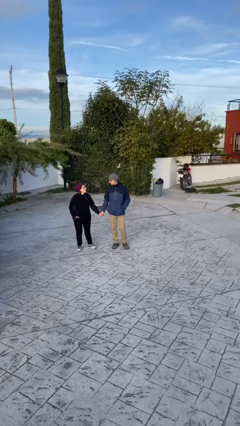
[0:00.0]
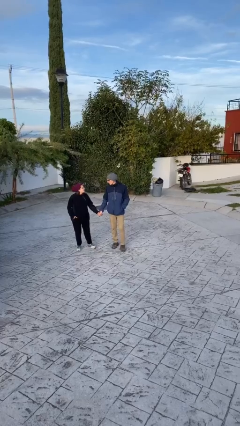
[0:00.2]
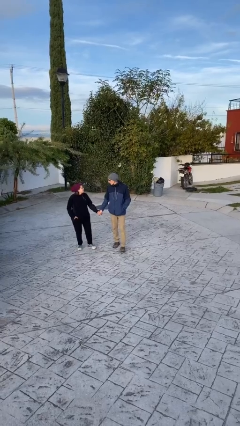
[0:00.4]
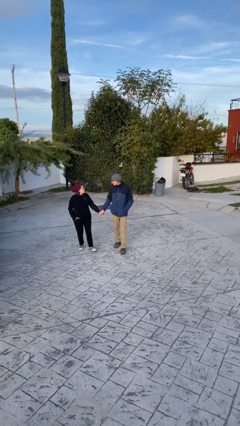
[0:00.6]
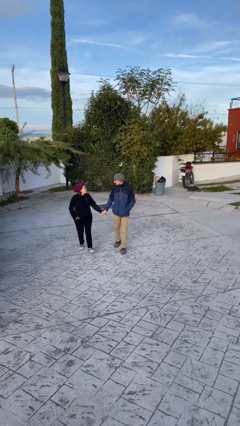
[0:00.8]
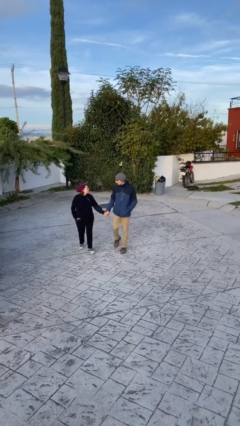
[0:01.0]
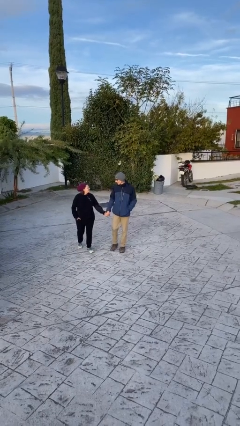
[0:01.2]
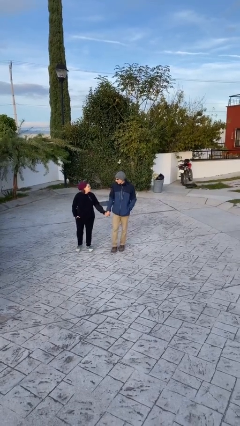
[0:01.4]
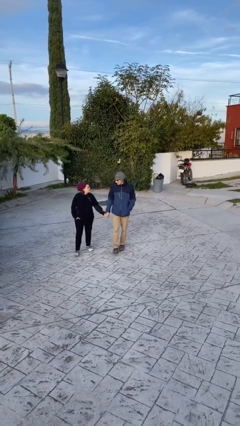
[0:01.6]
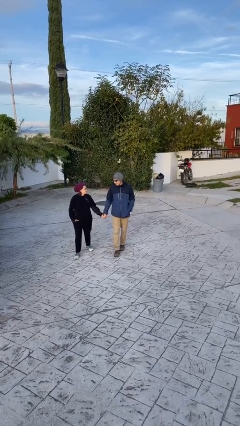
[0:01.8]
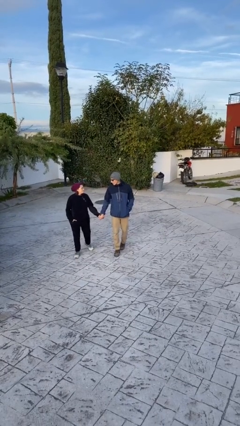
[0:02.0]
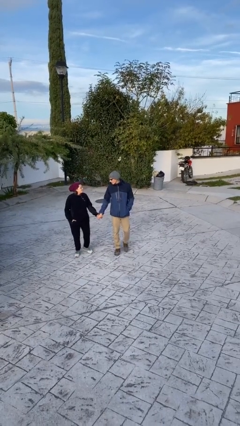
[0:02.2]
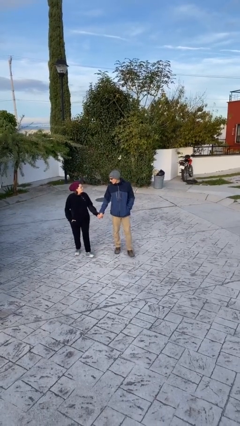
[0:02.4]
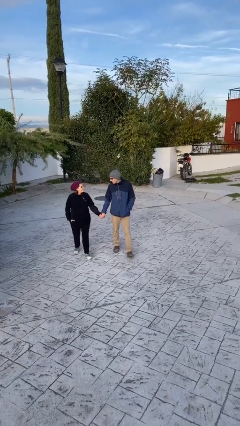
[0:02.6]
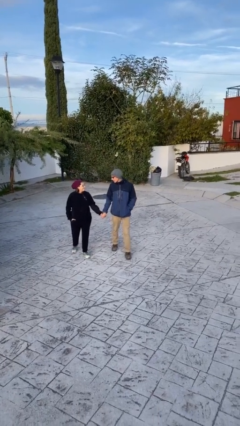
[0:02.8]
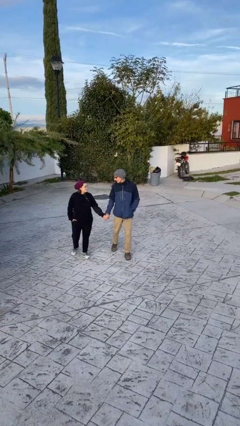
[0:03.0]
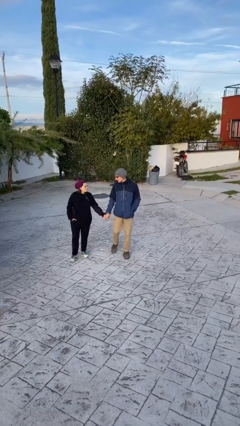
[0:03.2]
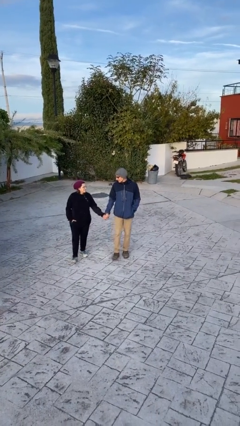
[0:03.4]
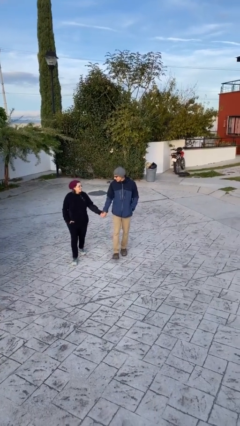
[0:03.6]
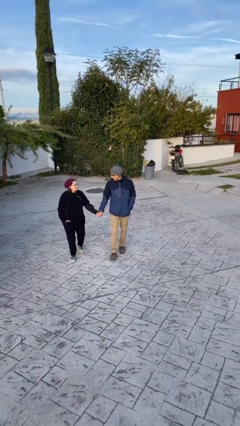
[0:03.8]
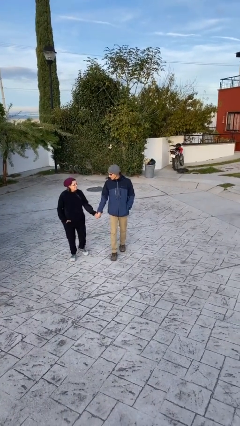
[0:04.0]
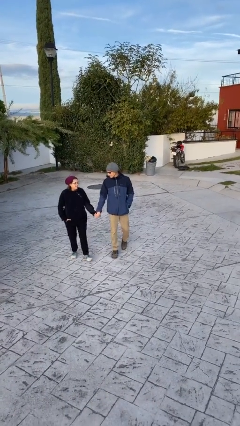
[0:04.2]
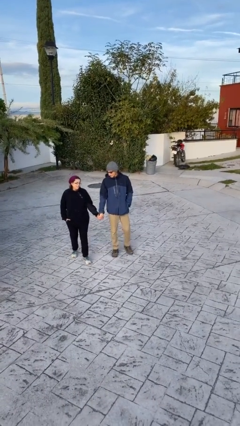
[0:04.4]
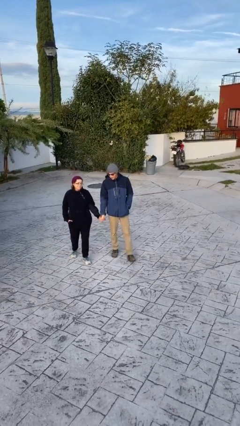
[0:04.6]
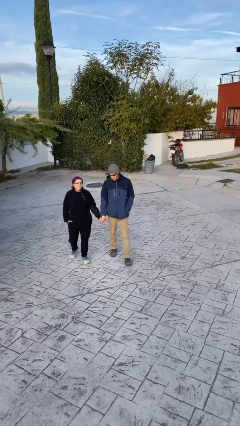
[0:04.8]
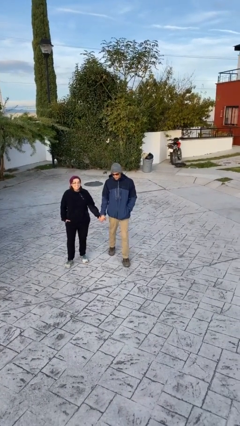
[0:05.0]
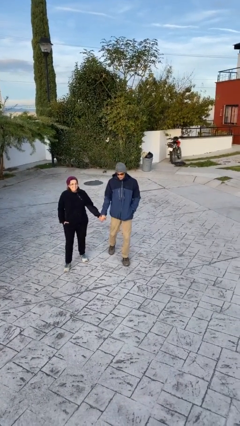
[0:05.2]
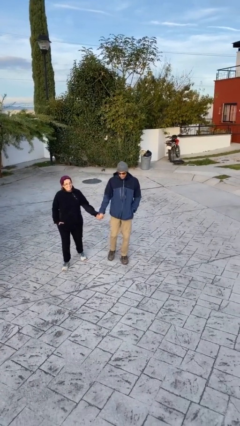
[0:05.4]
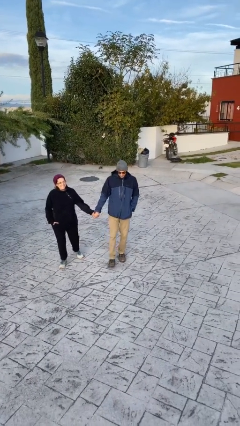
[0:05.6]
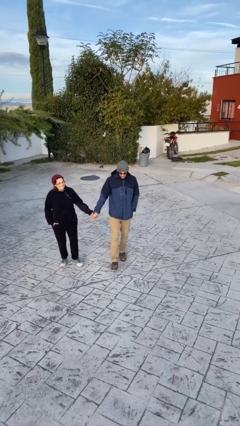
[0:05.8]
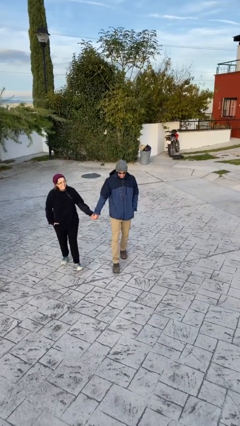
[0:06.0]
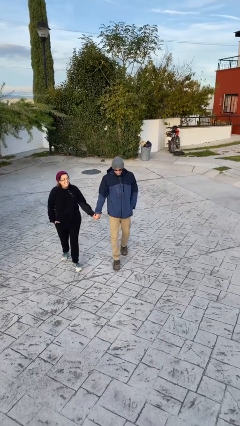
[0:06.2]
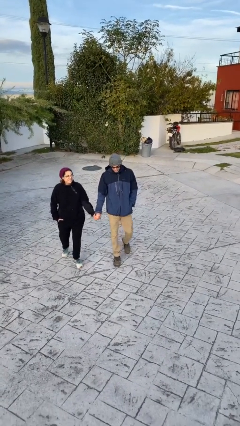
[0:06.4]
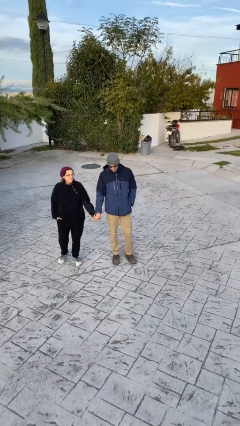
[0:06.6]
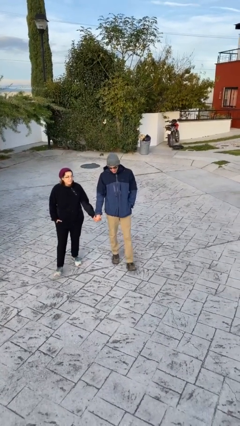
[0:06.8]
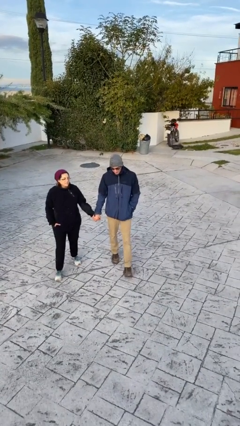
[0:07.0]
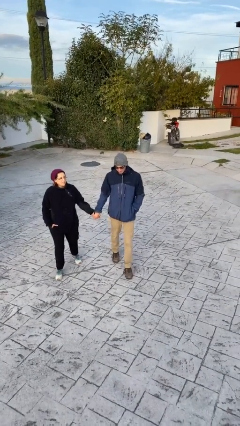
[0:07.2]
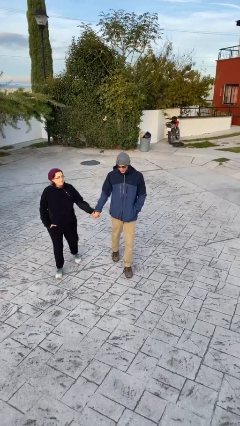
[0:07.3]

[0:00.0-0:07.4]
person holds hand

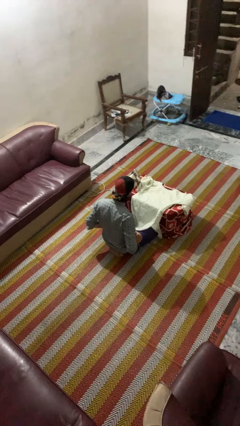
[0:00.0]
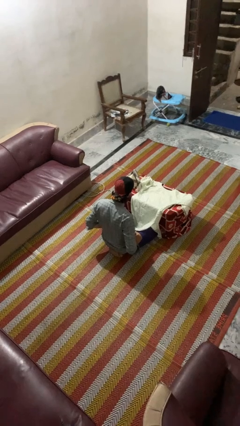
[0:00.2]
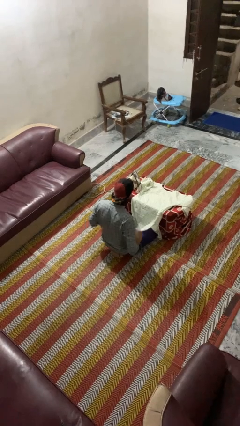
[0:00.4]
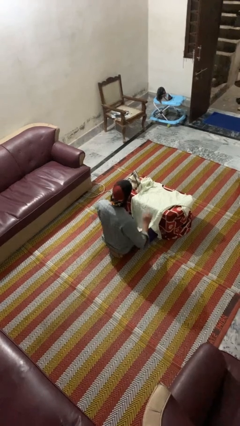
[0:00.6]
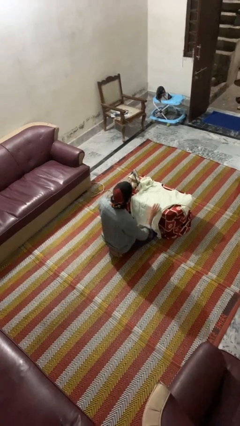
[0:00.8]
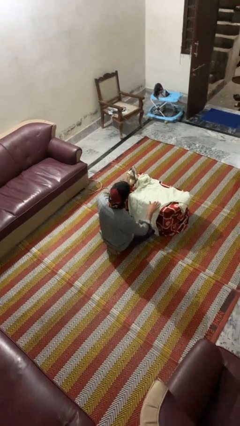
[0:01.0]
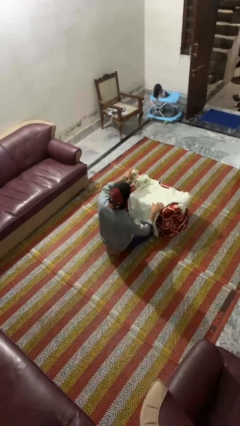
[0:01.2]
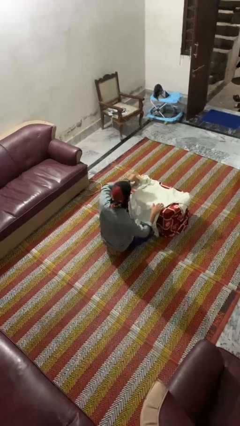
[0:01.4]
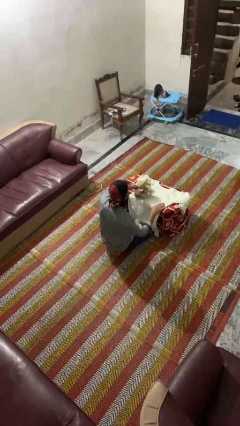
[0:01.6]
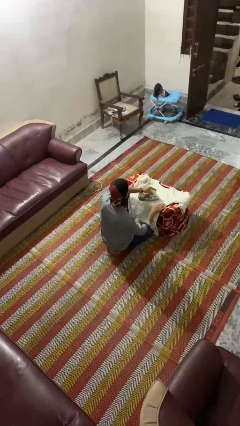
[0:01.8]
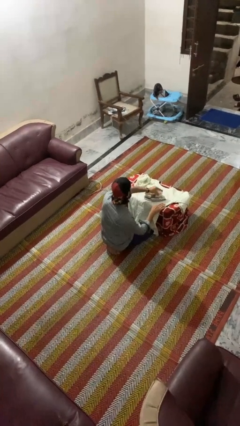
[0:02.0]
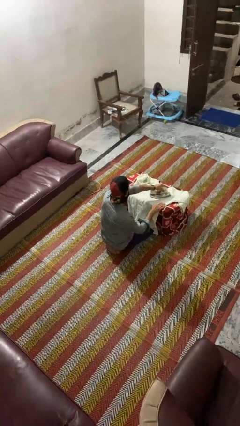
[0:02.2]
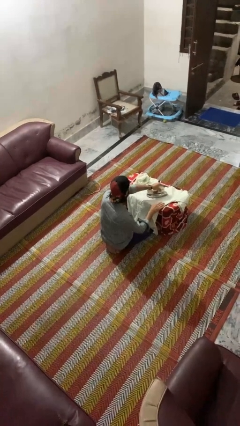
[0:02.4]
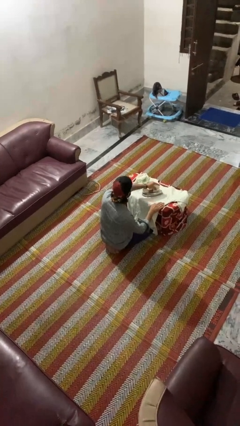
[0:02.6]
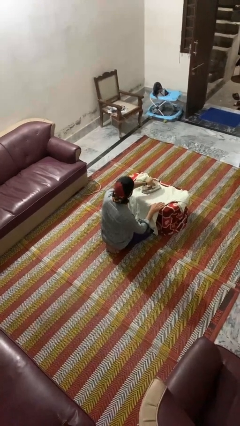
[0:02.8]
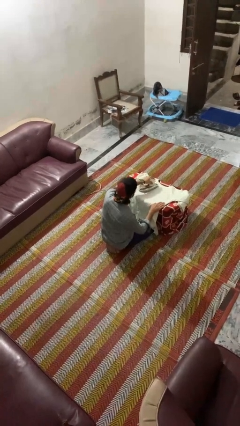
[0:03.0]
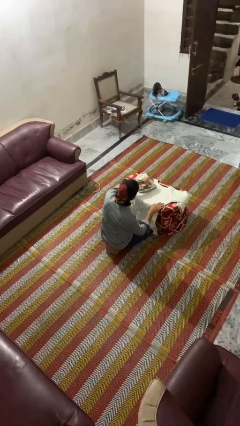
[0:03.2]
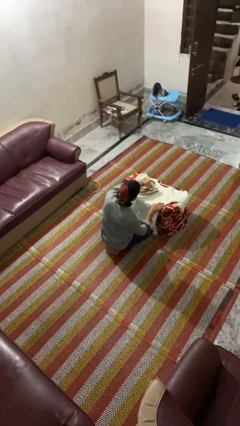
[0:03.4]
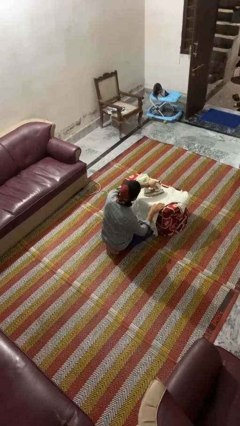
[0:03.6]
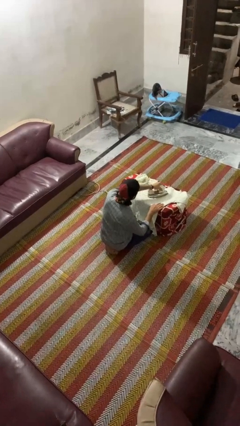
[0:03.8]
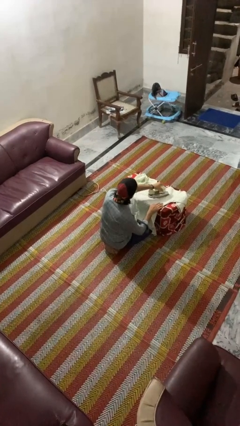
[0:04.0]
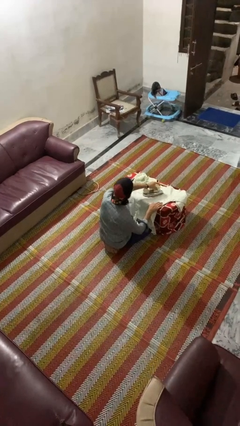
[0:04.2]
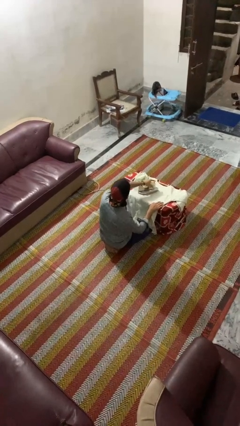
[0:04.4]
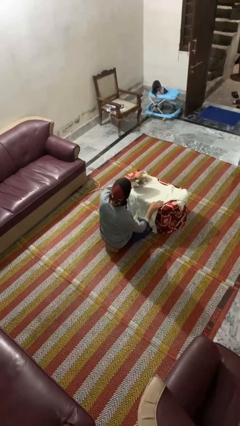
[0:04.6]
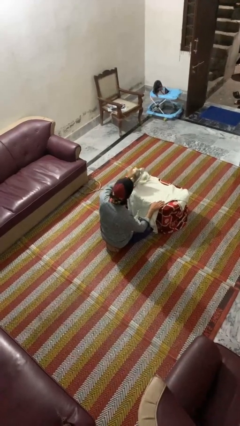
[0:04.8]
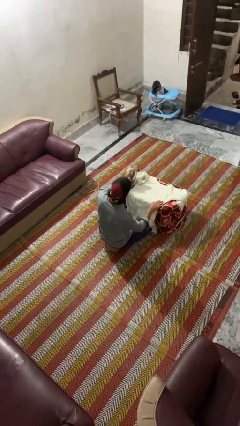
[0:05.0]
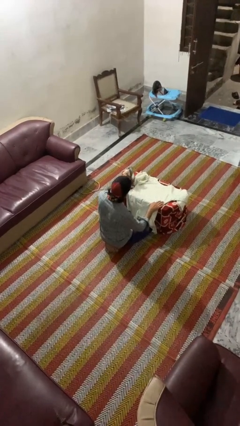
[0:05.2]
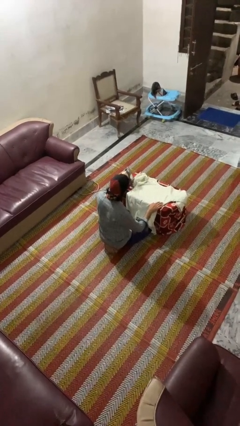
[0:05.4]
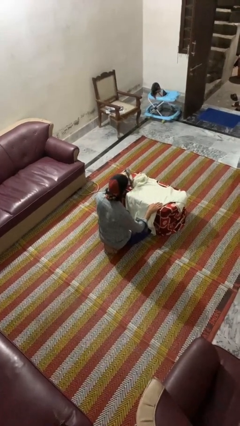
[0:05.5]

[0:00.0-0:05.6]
person irons clothes

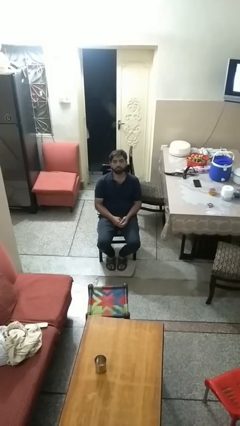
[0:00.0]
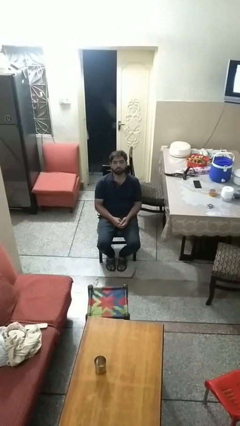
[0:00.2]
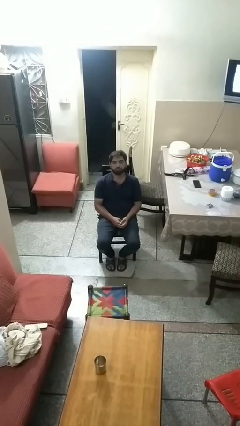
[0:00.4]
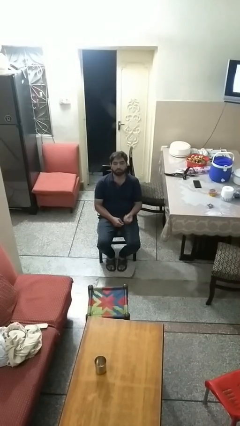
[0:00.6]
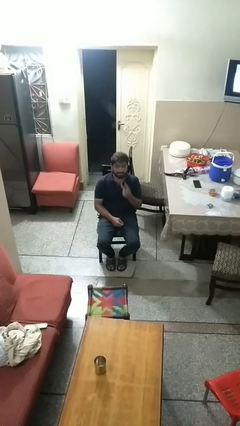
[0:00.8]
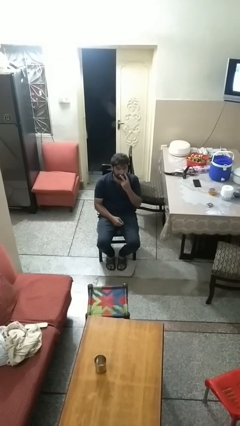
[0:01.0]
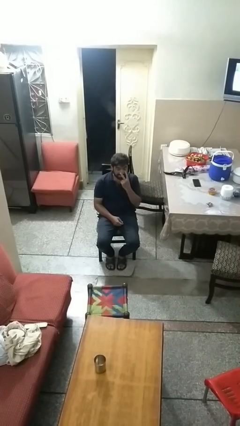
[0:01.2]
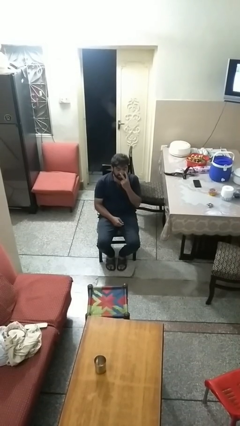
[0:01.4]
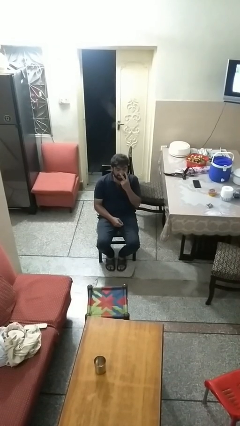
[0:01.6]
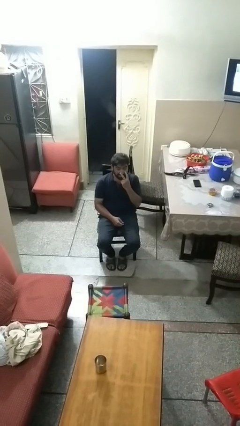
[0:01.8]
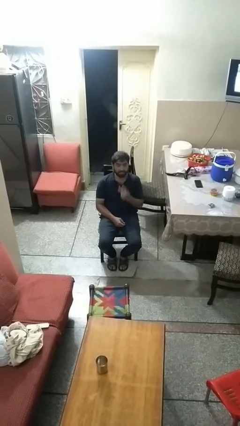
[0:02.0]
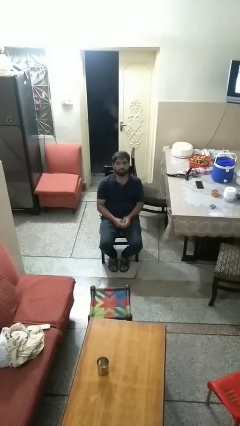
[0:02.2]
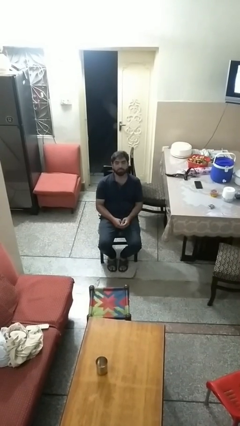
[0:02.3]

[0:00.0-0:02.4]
person gestures watch closely

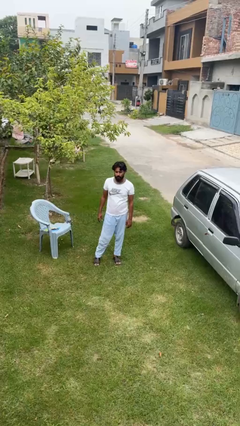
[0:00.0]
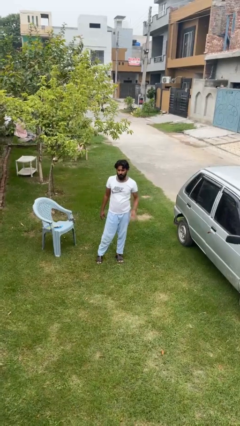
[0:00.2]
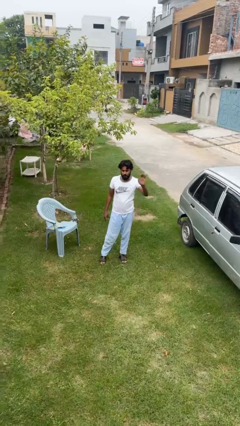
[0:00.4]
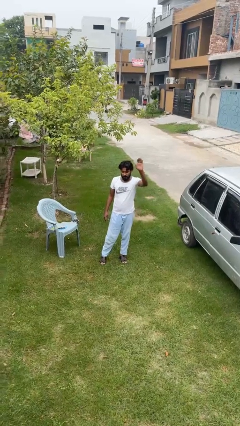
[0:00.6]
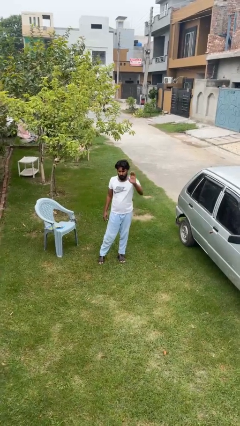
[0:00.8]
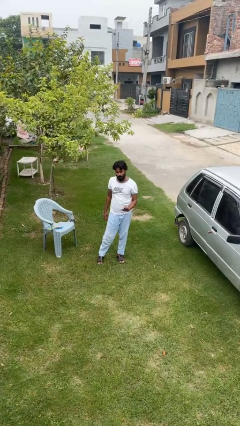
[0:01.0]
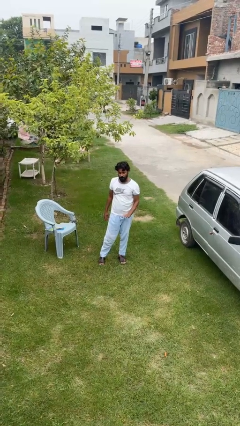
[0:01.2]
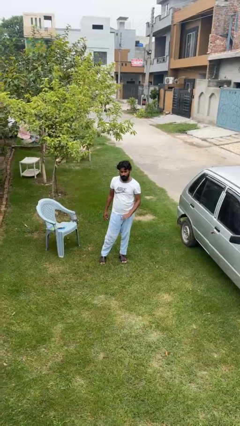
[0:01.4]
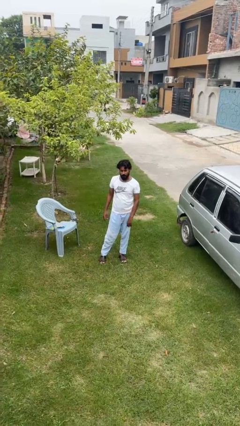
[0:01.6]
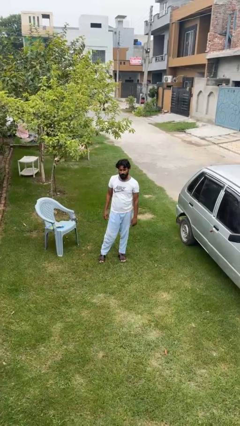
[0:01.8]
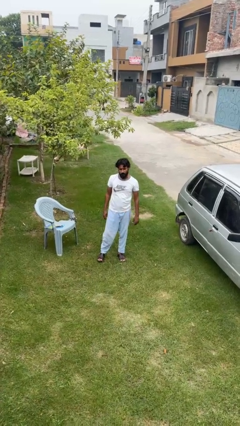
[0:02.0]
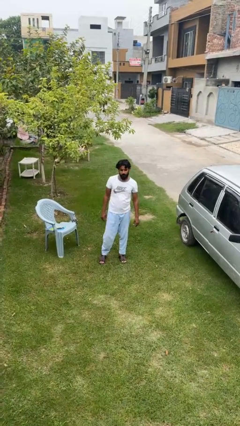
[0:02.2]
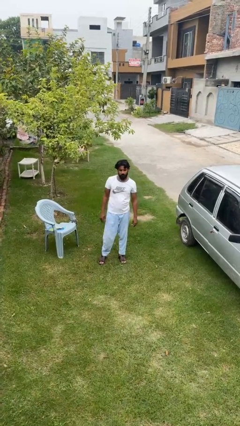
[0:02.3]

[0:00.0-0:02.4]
person gestures swipe down
